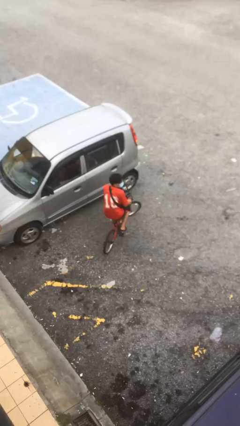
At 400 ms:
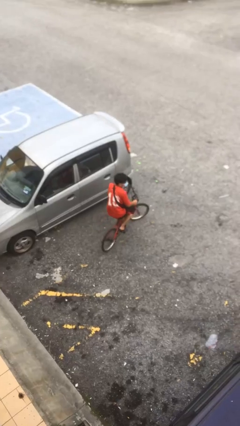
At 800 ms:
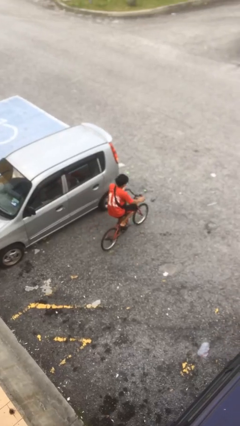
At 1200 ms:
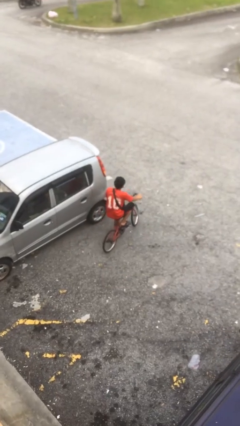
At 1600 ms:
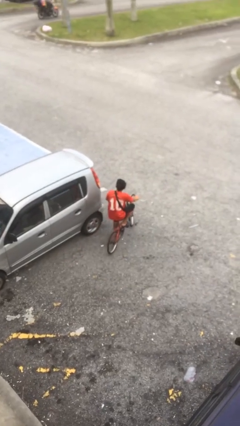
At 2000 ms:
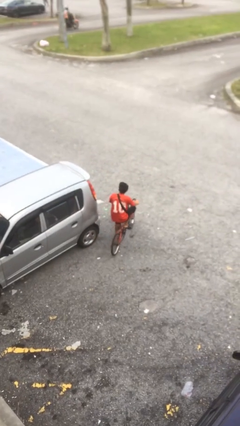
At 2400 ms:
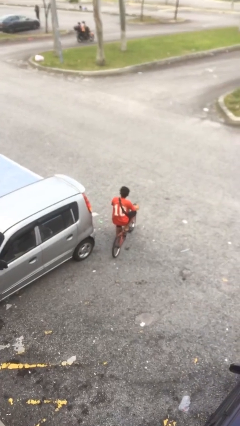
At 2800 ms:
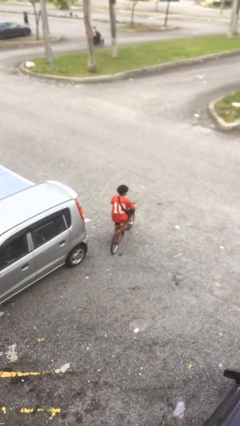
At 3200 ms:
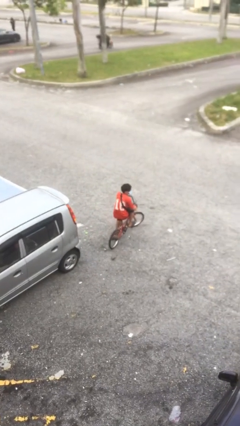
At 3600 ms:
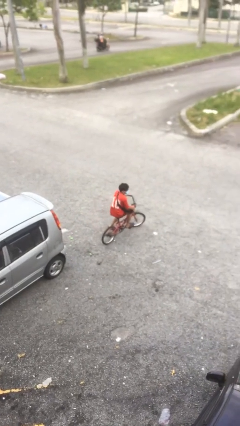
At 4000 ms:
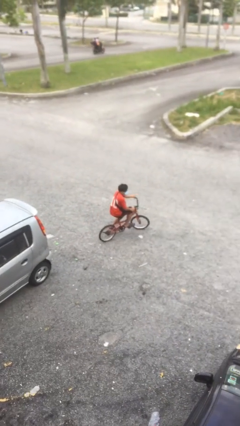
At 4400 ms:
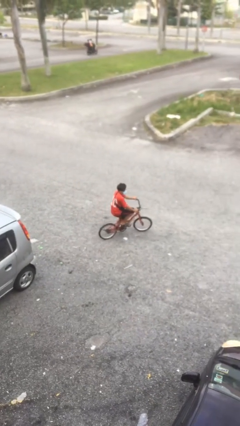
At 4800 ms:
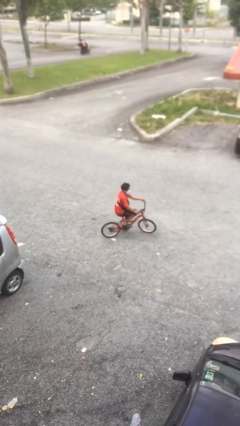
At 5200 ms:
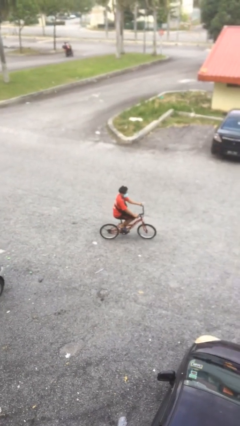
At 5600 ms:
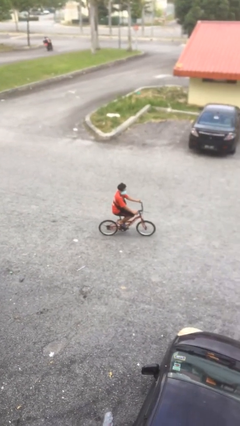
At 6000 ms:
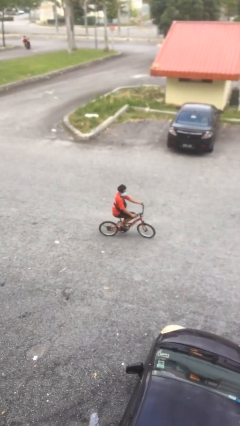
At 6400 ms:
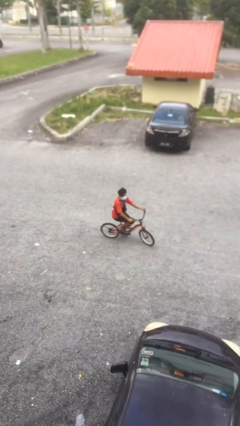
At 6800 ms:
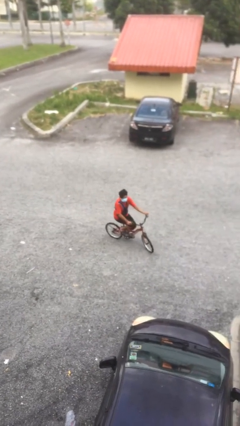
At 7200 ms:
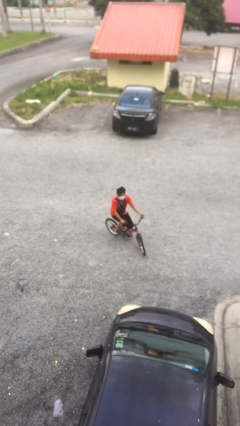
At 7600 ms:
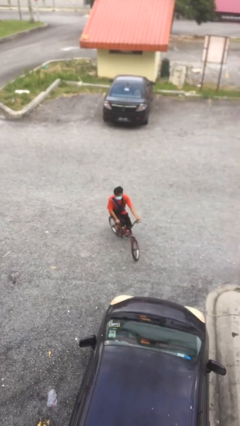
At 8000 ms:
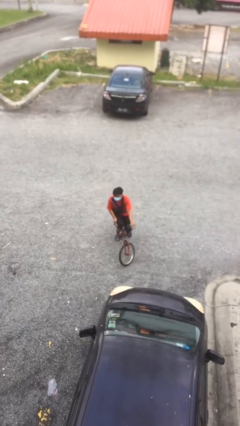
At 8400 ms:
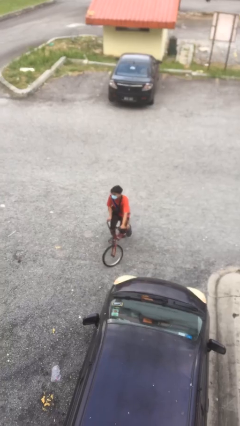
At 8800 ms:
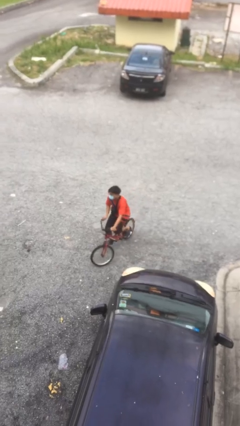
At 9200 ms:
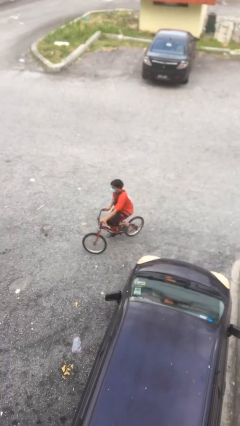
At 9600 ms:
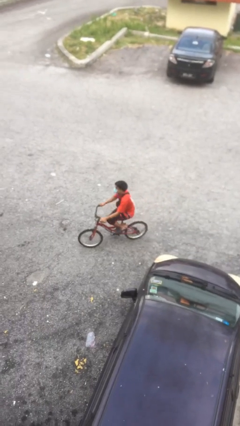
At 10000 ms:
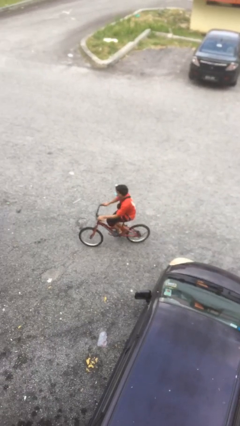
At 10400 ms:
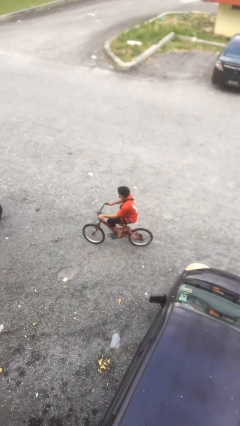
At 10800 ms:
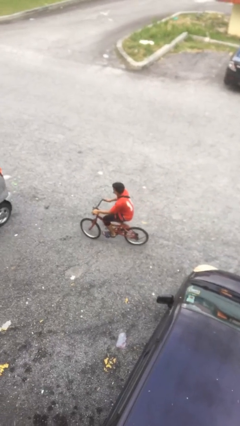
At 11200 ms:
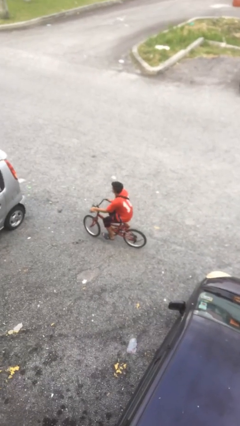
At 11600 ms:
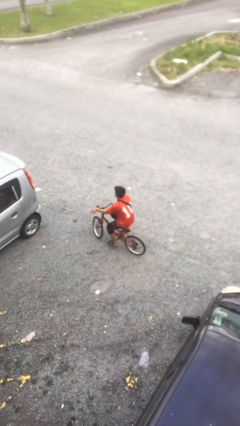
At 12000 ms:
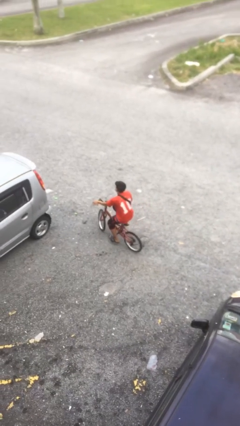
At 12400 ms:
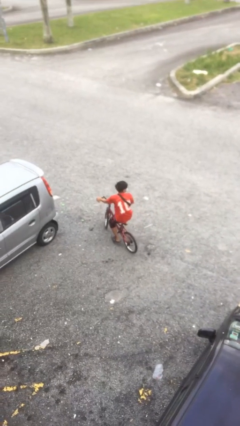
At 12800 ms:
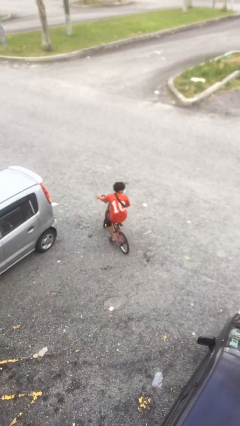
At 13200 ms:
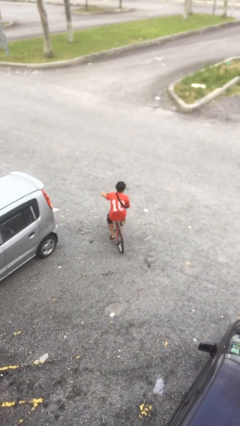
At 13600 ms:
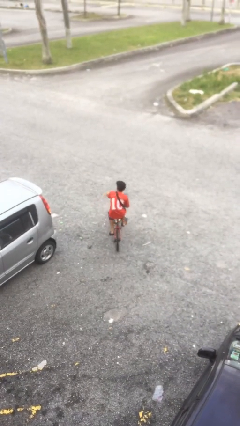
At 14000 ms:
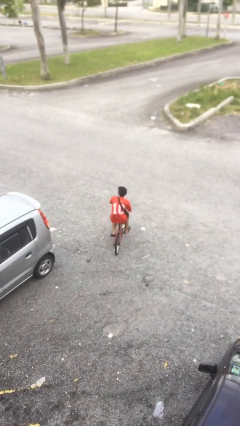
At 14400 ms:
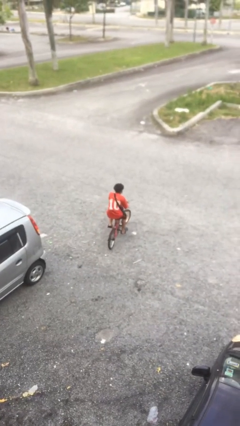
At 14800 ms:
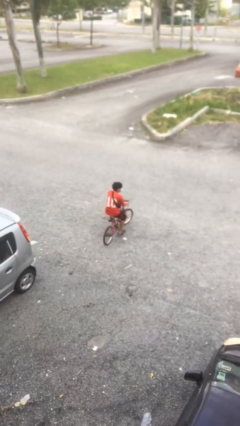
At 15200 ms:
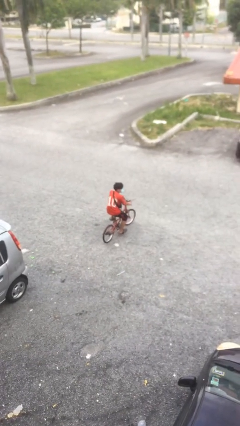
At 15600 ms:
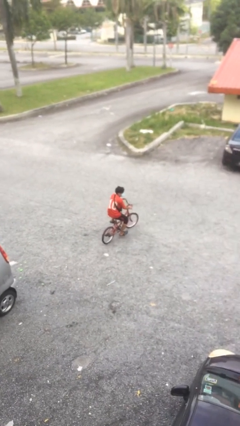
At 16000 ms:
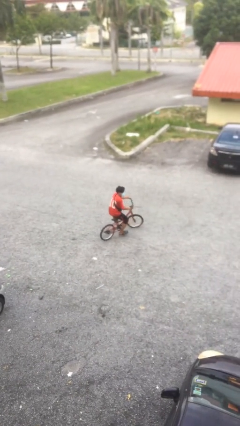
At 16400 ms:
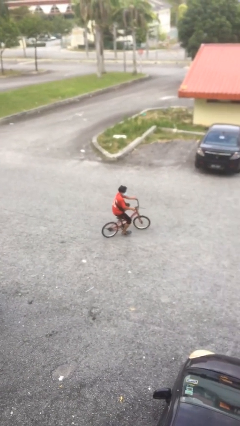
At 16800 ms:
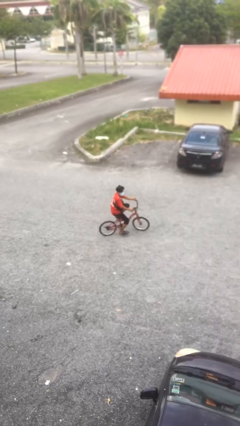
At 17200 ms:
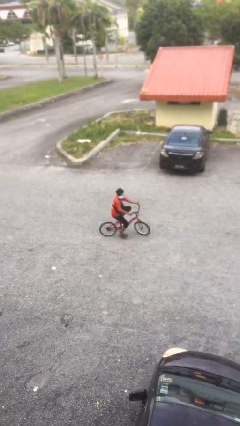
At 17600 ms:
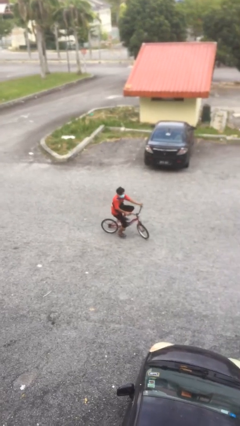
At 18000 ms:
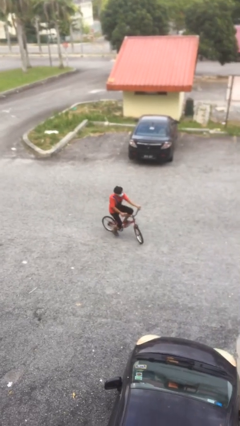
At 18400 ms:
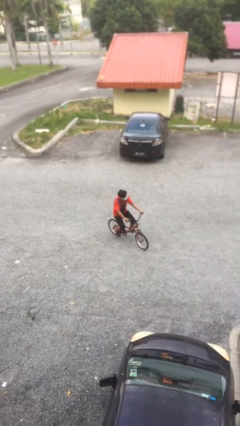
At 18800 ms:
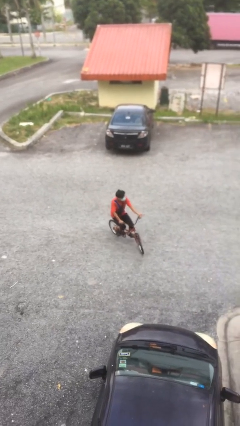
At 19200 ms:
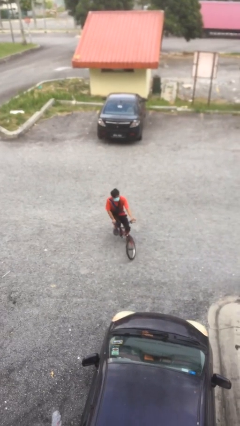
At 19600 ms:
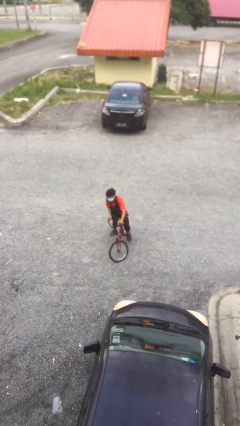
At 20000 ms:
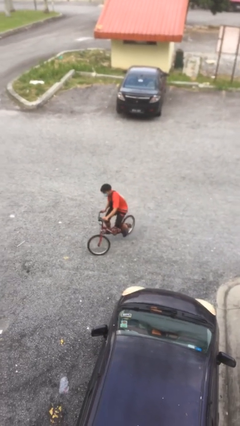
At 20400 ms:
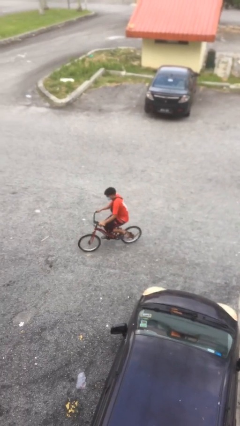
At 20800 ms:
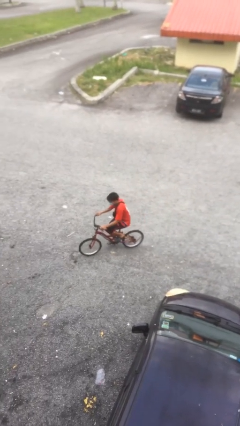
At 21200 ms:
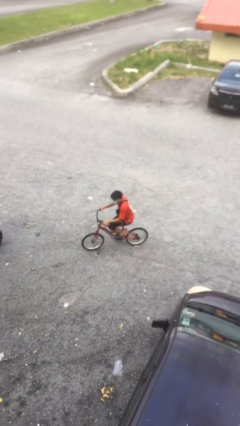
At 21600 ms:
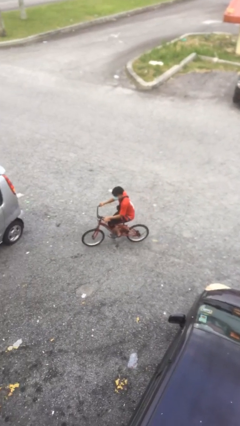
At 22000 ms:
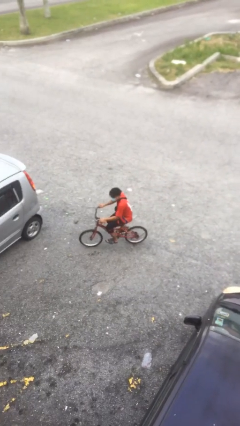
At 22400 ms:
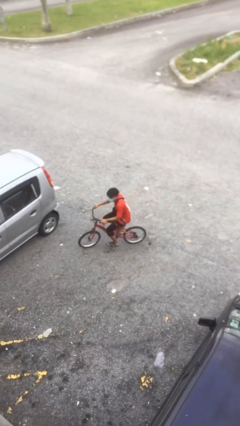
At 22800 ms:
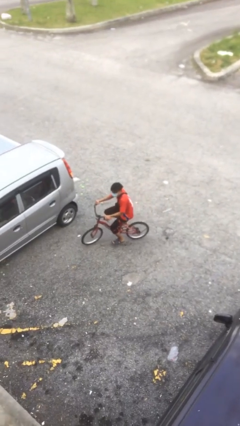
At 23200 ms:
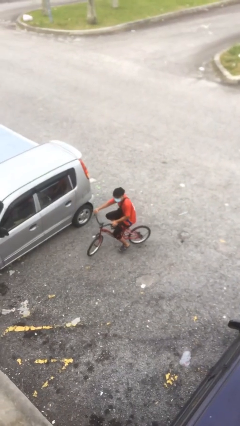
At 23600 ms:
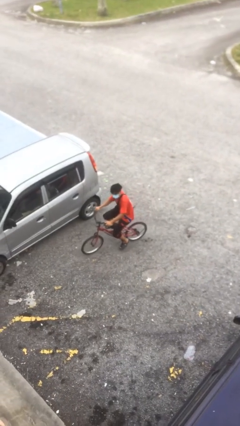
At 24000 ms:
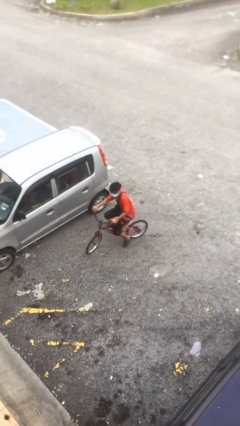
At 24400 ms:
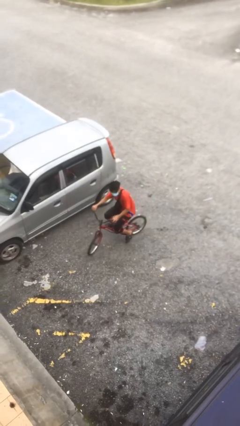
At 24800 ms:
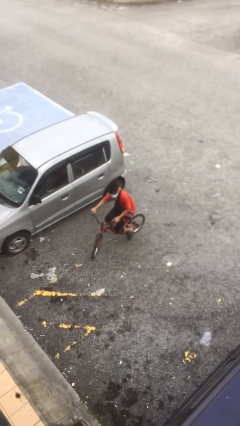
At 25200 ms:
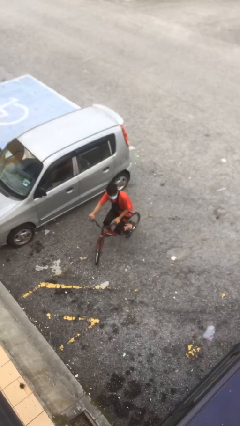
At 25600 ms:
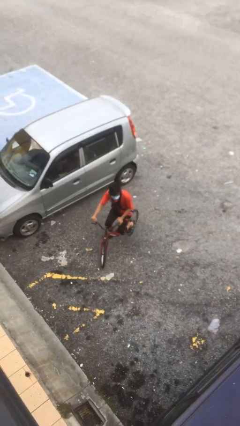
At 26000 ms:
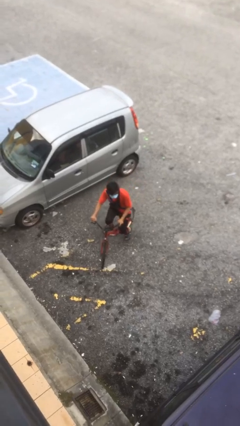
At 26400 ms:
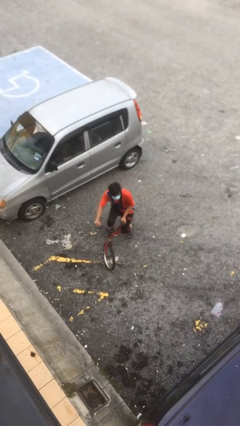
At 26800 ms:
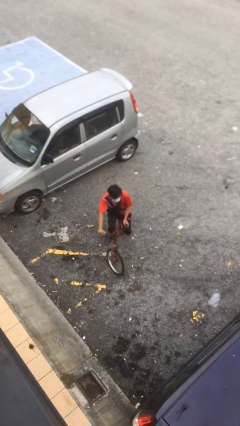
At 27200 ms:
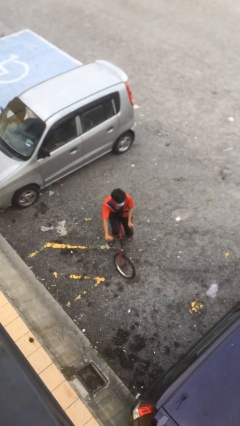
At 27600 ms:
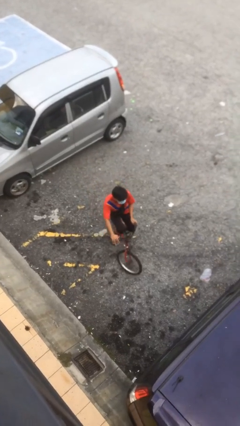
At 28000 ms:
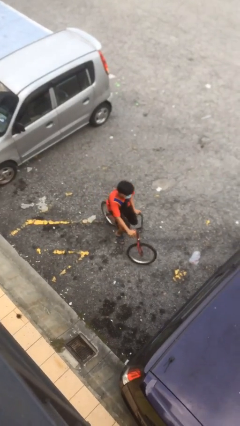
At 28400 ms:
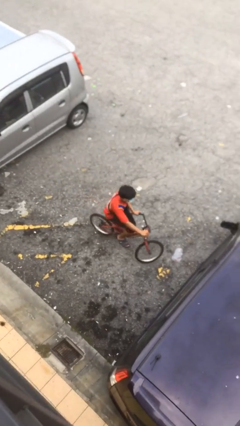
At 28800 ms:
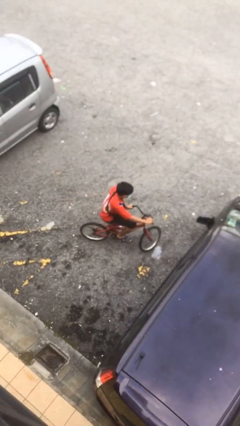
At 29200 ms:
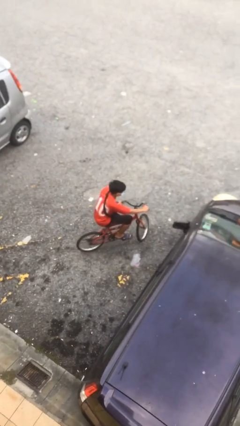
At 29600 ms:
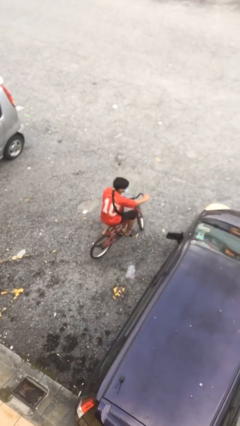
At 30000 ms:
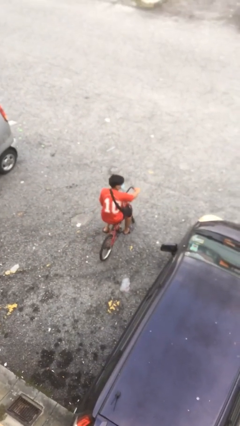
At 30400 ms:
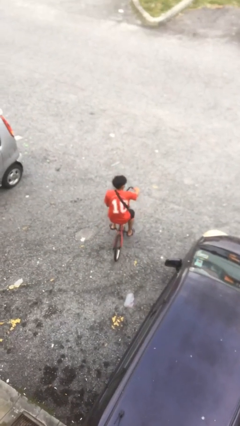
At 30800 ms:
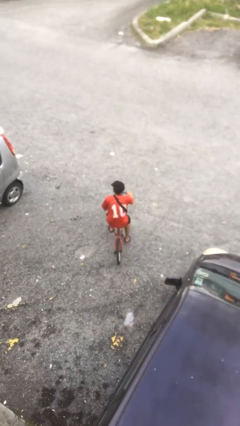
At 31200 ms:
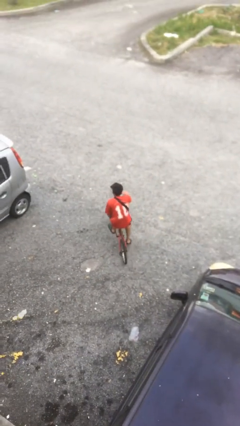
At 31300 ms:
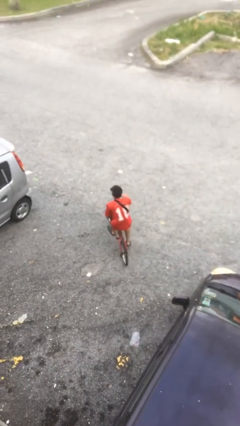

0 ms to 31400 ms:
person rides bicycle

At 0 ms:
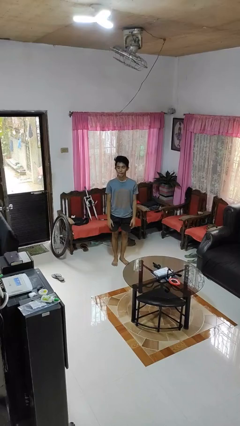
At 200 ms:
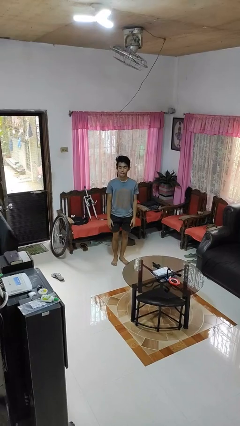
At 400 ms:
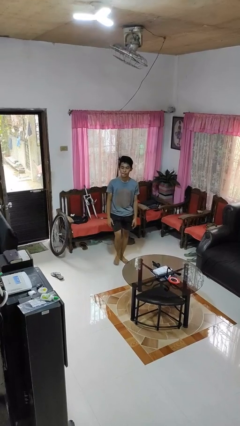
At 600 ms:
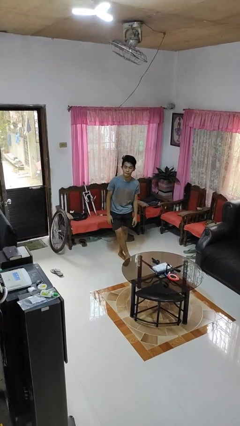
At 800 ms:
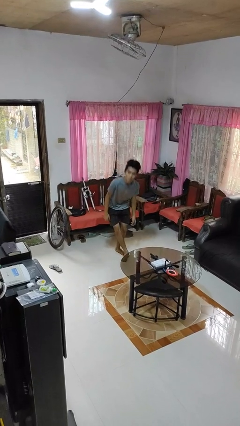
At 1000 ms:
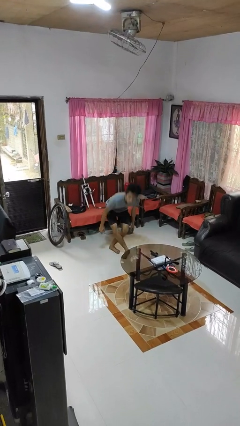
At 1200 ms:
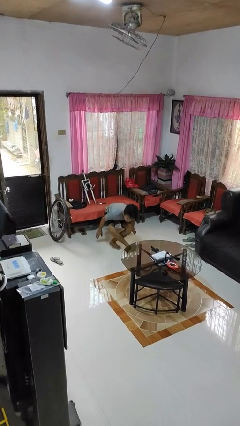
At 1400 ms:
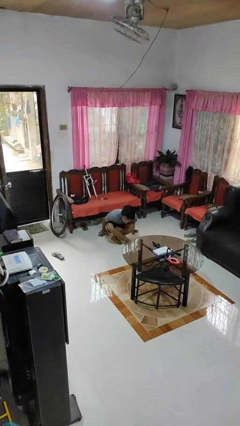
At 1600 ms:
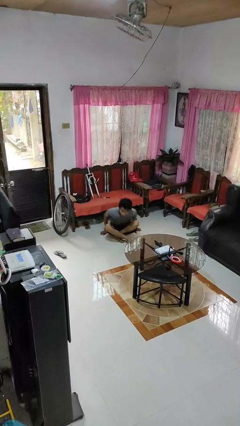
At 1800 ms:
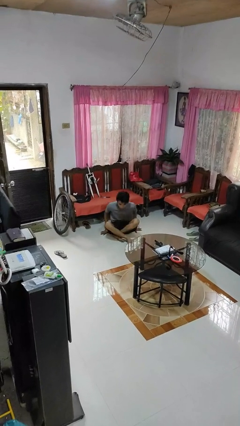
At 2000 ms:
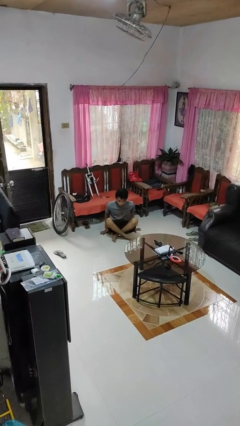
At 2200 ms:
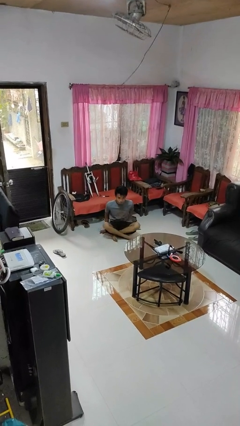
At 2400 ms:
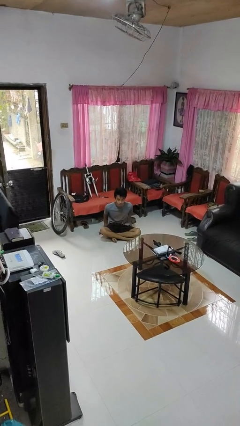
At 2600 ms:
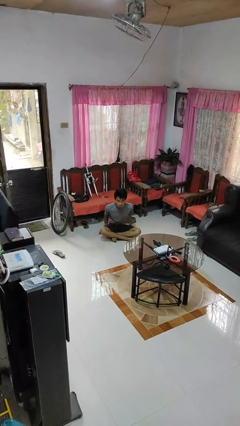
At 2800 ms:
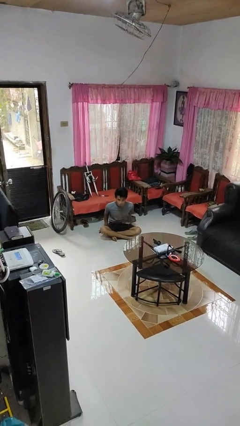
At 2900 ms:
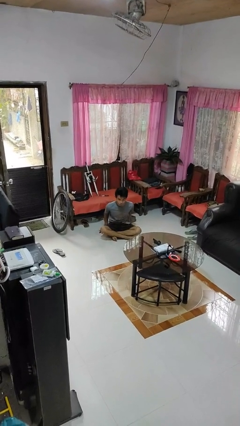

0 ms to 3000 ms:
person sits crisscross
